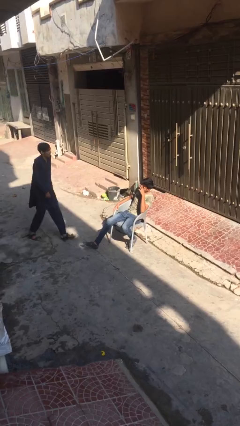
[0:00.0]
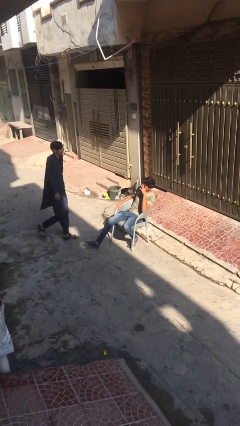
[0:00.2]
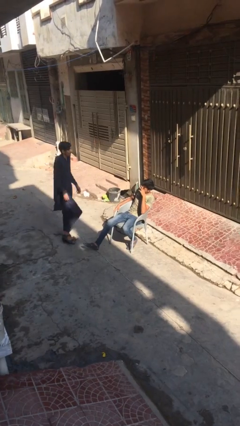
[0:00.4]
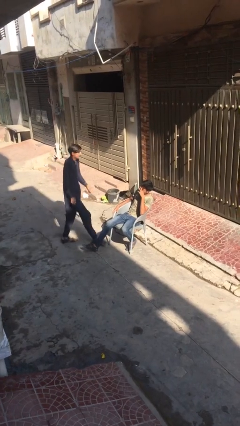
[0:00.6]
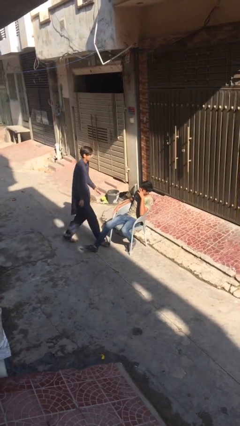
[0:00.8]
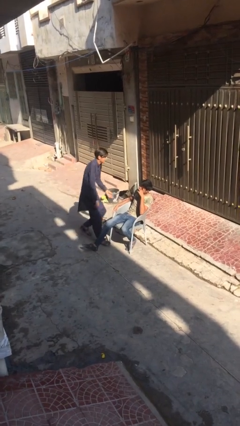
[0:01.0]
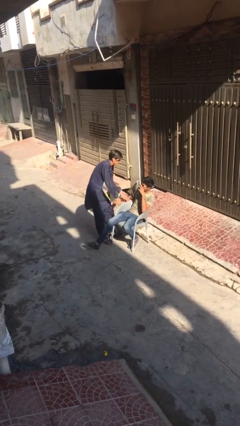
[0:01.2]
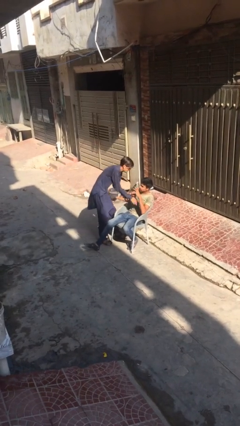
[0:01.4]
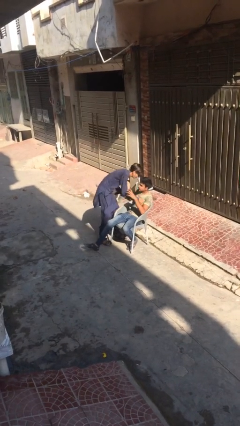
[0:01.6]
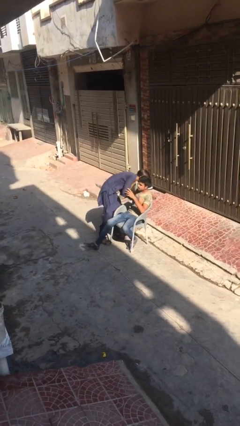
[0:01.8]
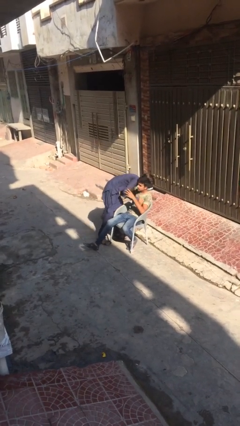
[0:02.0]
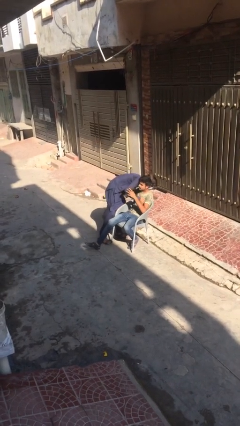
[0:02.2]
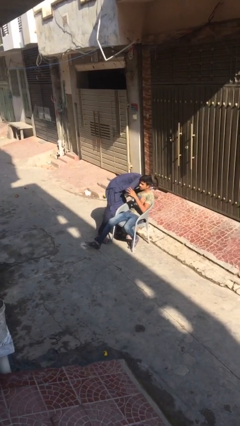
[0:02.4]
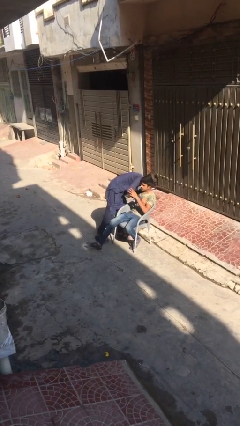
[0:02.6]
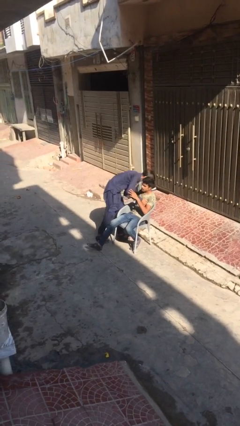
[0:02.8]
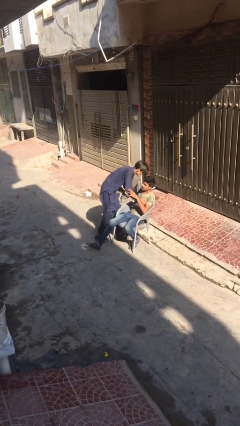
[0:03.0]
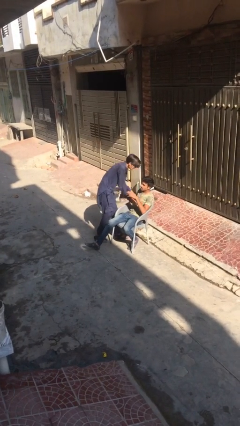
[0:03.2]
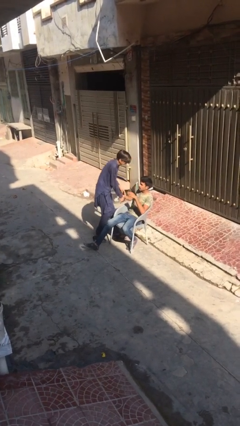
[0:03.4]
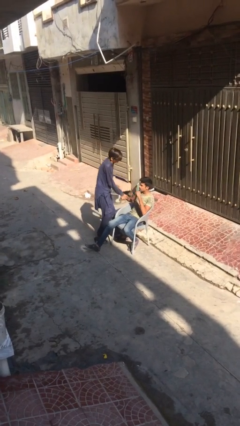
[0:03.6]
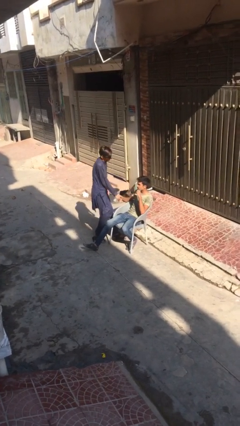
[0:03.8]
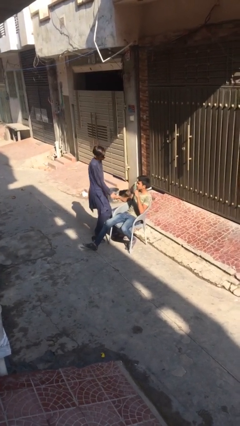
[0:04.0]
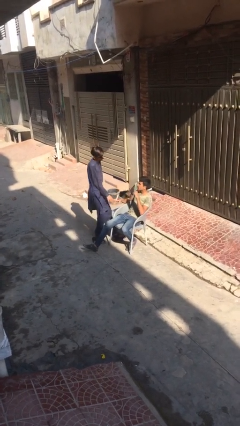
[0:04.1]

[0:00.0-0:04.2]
person embraces person

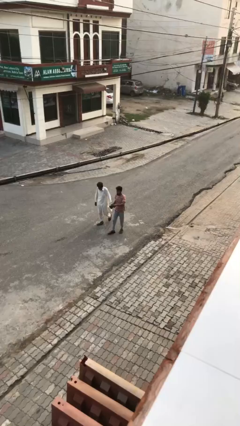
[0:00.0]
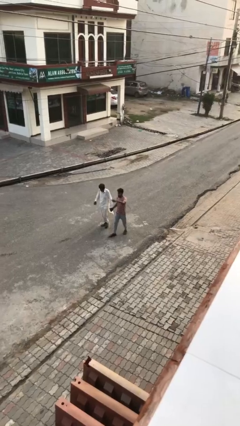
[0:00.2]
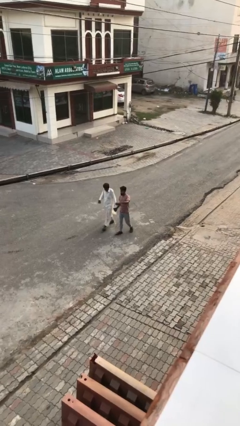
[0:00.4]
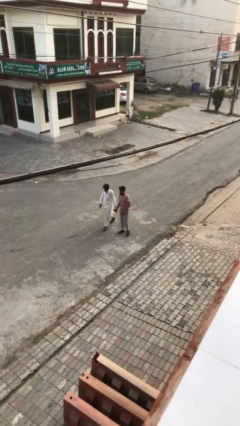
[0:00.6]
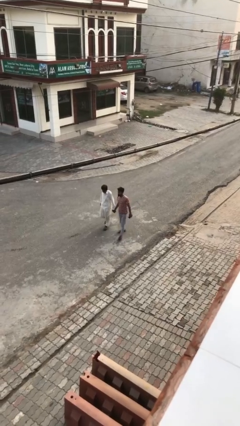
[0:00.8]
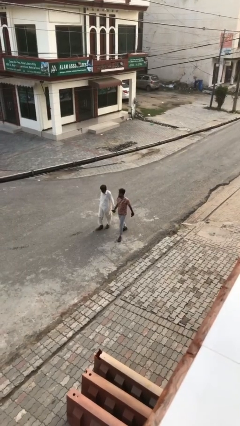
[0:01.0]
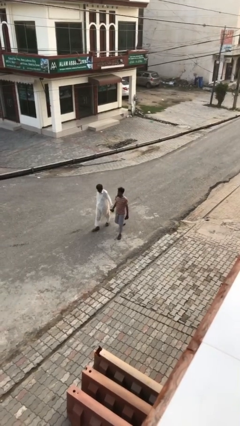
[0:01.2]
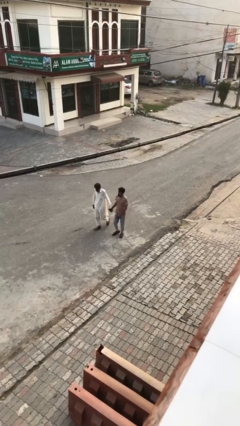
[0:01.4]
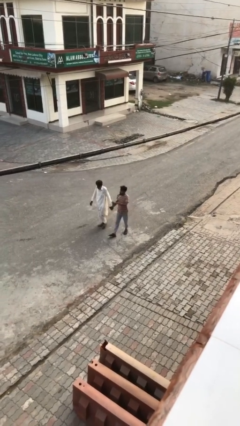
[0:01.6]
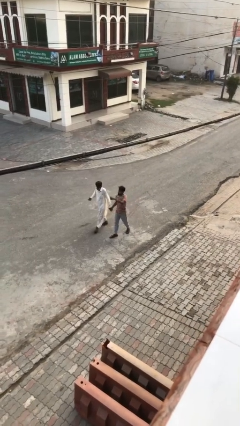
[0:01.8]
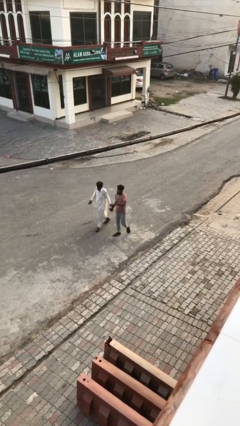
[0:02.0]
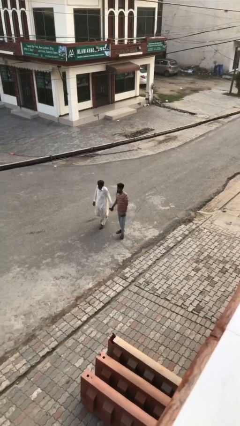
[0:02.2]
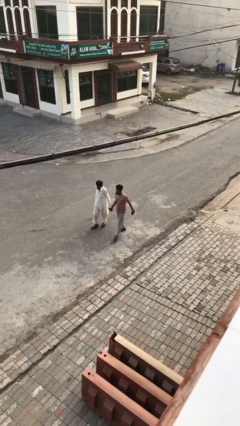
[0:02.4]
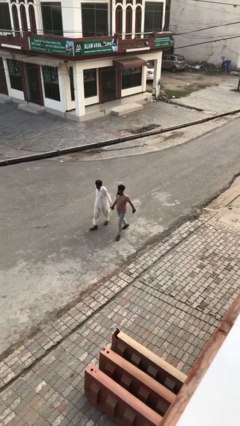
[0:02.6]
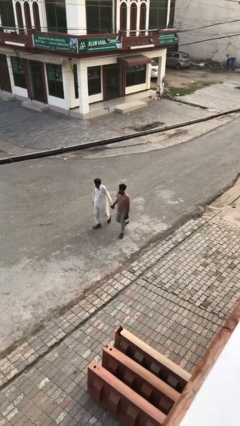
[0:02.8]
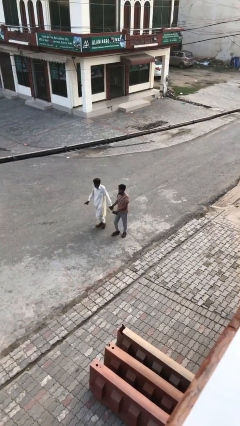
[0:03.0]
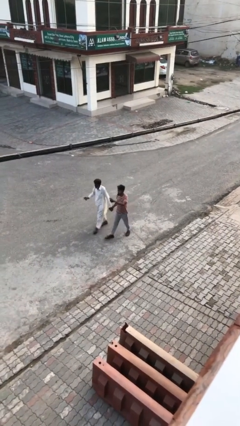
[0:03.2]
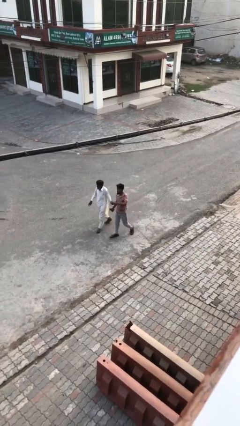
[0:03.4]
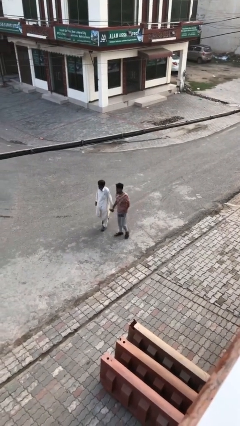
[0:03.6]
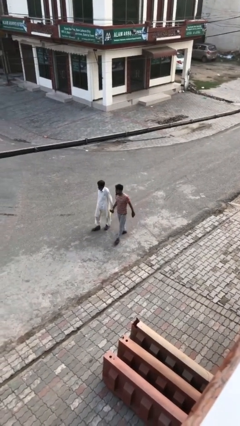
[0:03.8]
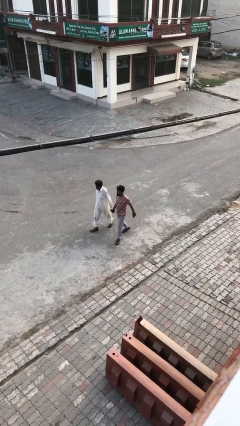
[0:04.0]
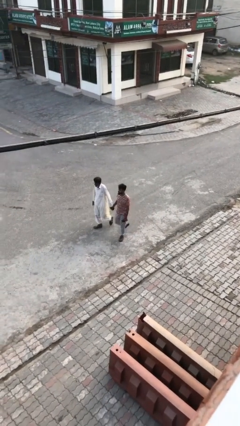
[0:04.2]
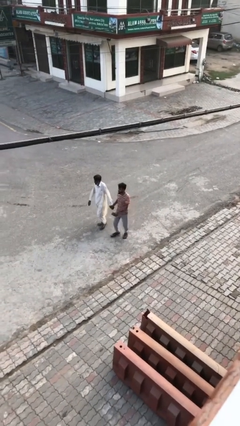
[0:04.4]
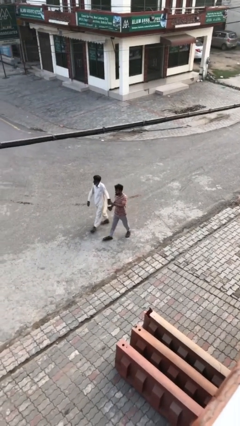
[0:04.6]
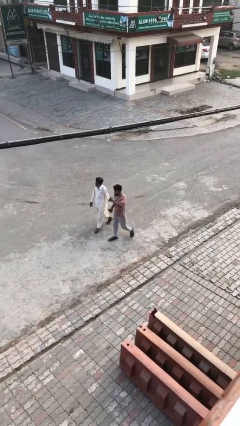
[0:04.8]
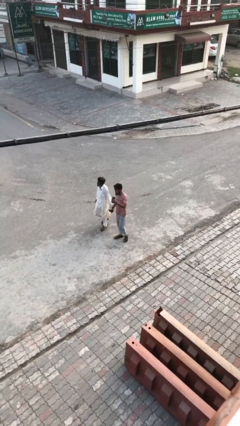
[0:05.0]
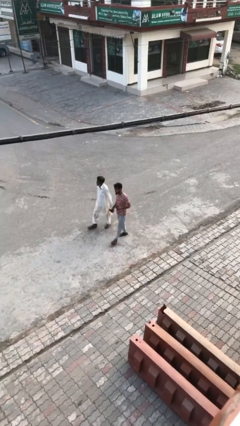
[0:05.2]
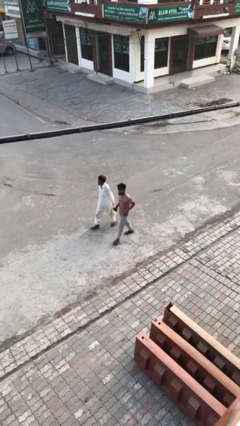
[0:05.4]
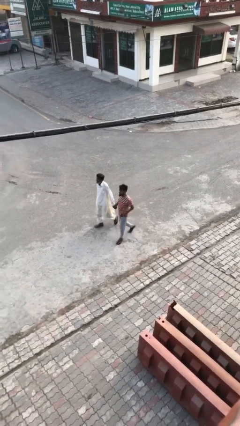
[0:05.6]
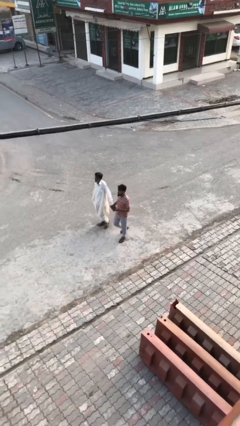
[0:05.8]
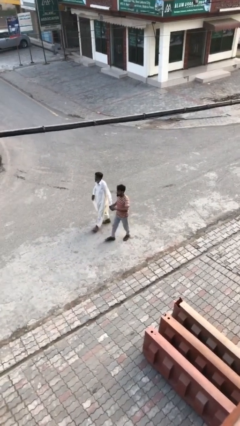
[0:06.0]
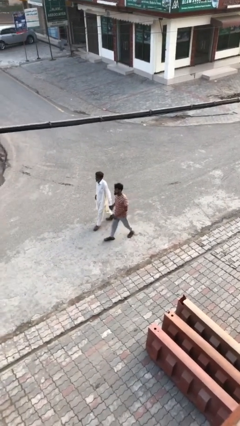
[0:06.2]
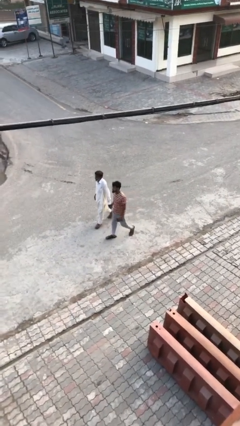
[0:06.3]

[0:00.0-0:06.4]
person holds hand

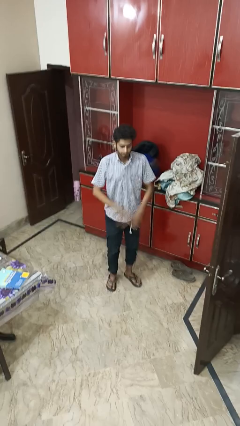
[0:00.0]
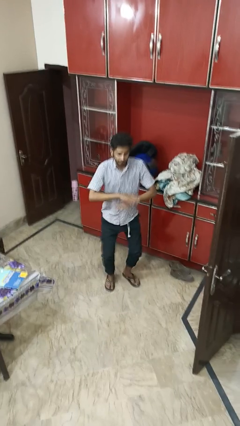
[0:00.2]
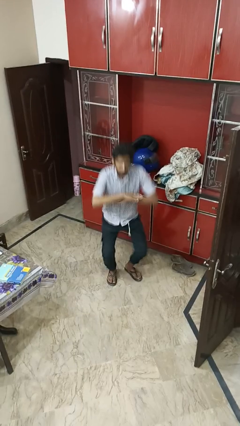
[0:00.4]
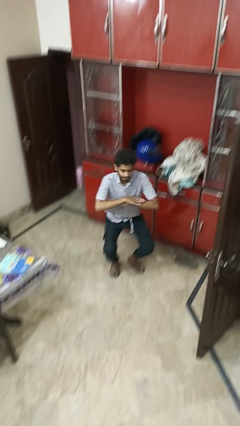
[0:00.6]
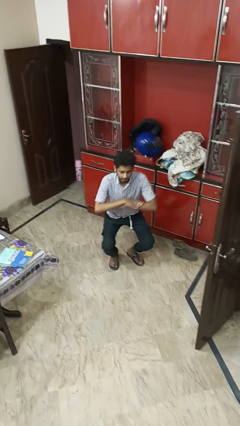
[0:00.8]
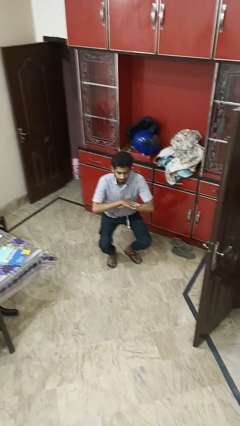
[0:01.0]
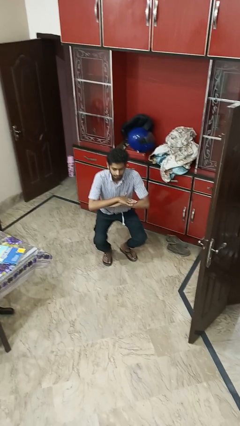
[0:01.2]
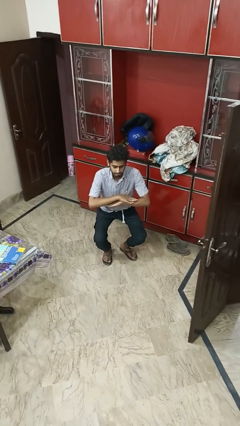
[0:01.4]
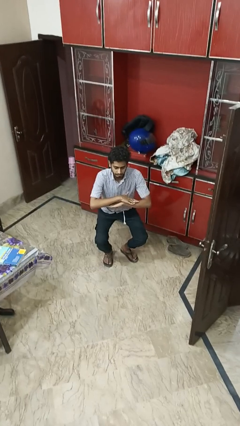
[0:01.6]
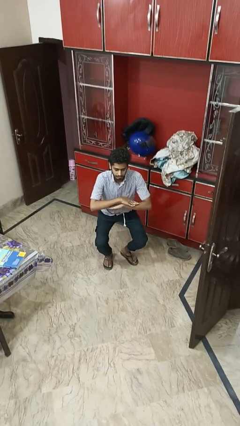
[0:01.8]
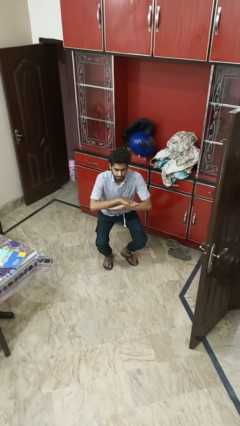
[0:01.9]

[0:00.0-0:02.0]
person squats

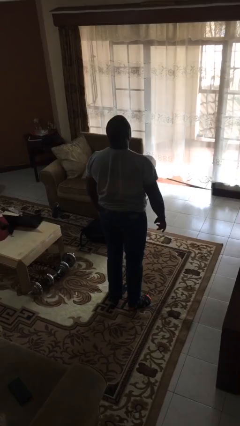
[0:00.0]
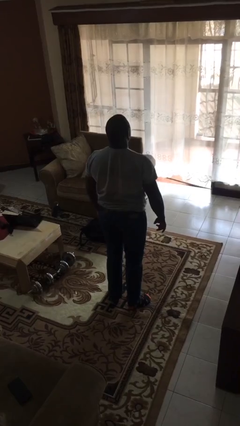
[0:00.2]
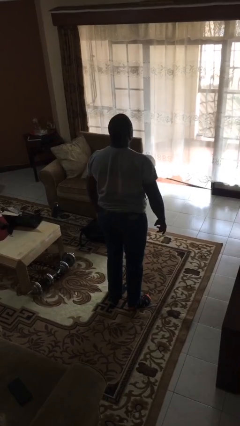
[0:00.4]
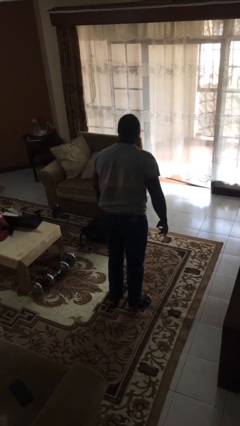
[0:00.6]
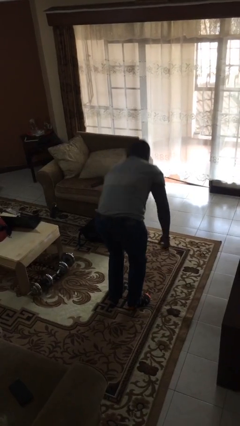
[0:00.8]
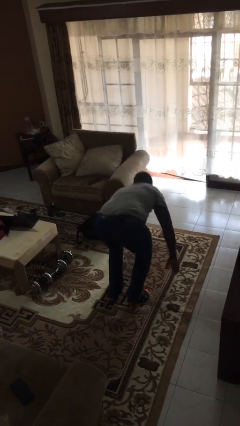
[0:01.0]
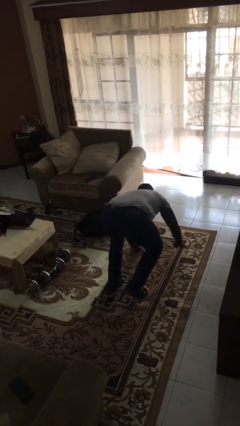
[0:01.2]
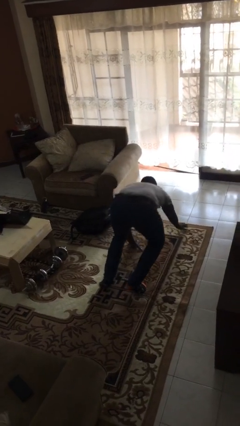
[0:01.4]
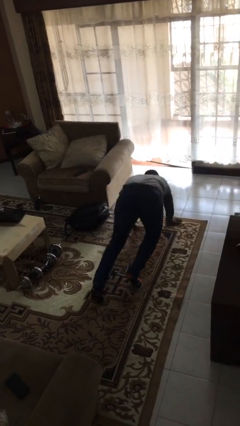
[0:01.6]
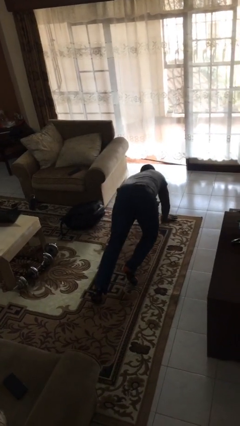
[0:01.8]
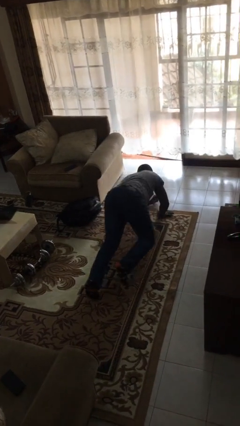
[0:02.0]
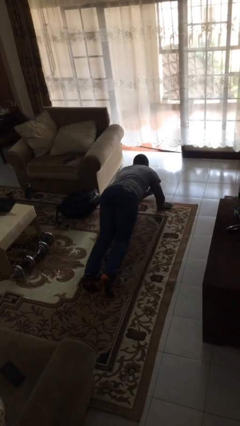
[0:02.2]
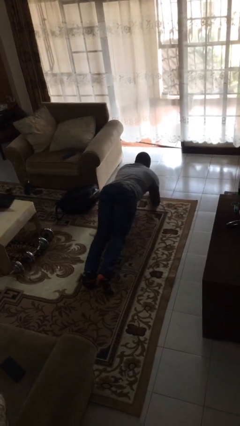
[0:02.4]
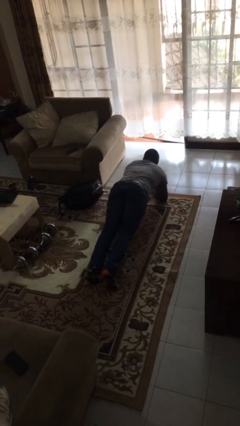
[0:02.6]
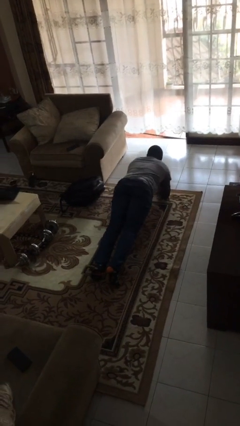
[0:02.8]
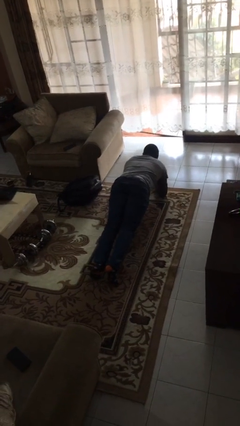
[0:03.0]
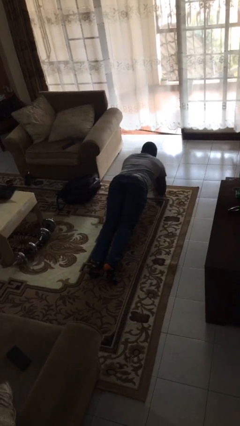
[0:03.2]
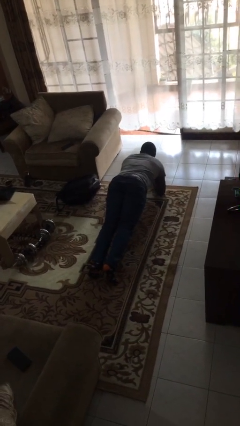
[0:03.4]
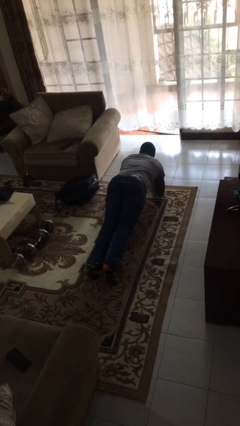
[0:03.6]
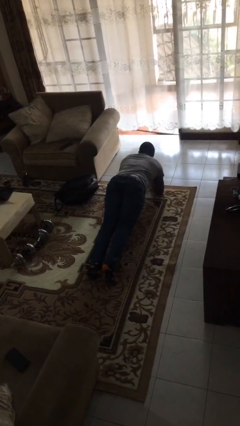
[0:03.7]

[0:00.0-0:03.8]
person exercises with plank

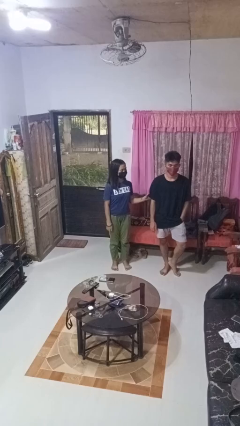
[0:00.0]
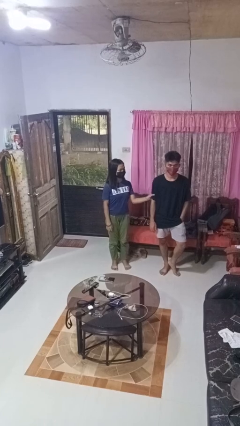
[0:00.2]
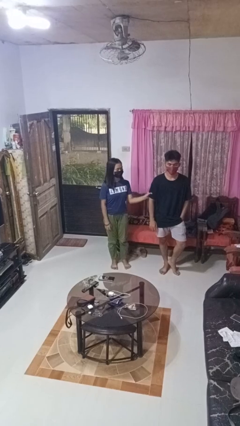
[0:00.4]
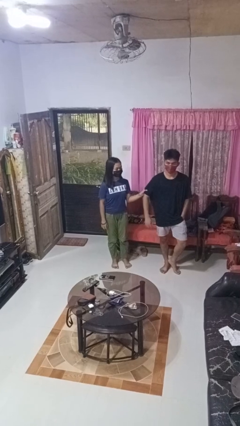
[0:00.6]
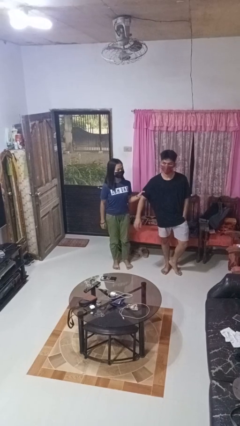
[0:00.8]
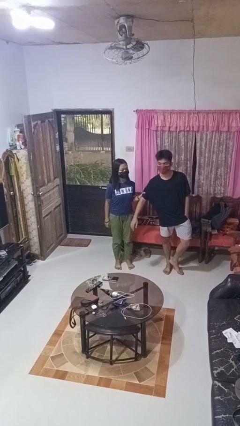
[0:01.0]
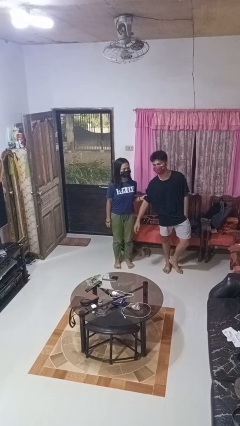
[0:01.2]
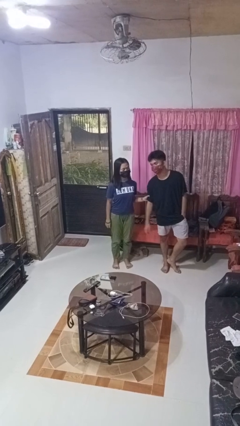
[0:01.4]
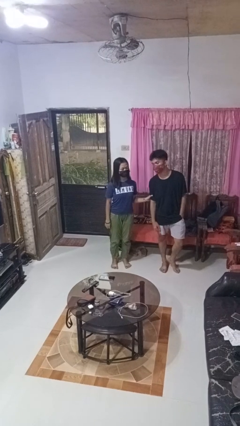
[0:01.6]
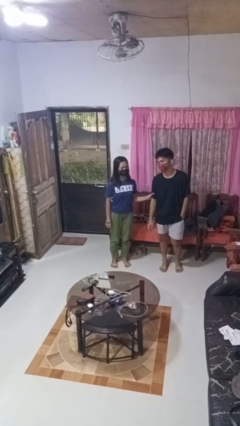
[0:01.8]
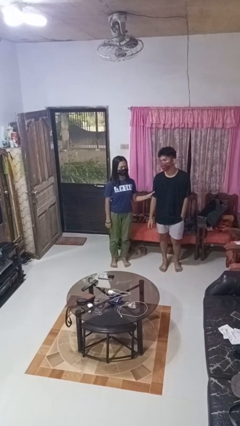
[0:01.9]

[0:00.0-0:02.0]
person grabs person by bicep
